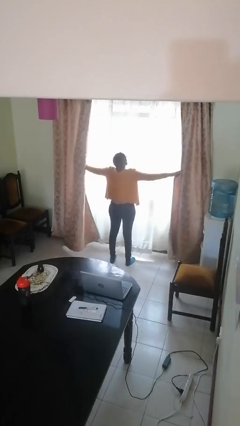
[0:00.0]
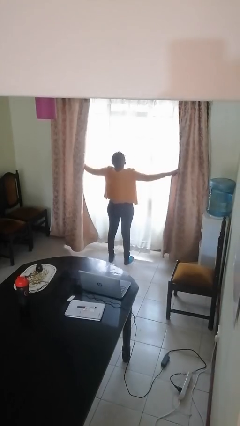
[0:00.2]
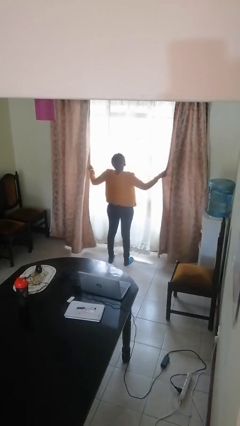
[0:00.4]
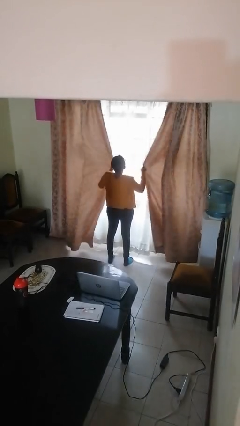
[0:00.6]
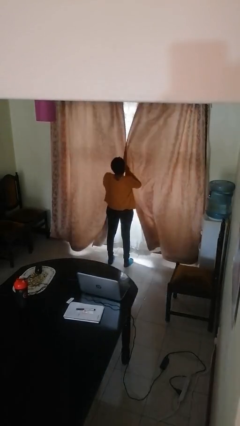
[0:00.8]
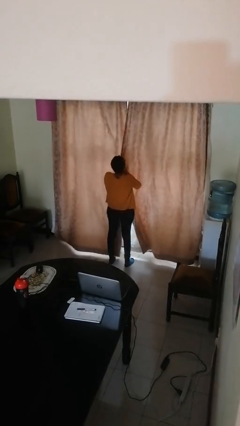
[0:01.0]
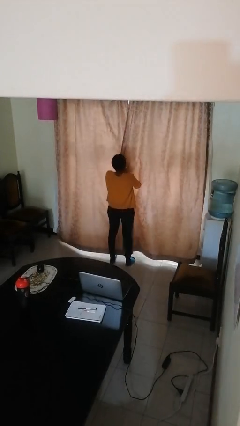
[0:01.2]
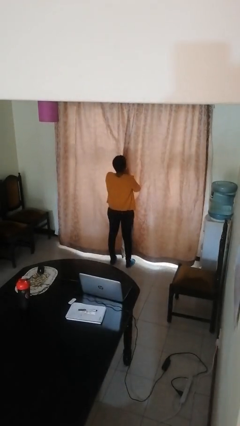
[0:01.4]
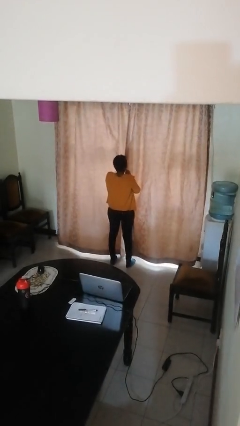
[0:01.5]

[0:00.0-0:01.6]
person closes curtains

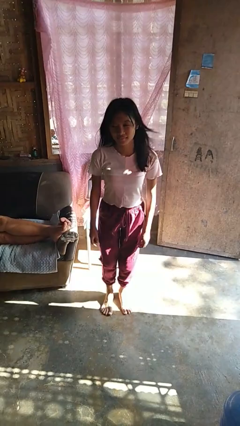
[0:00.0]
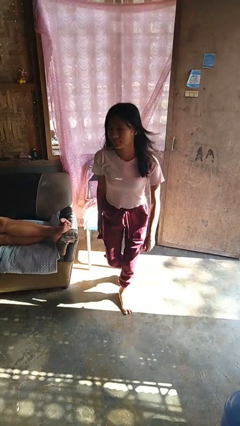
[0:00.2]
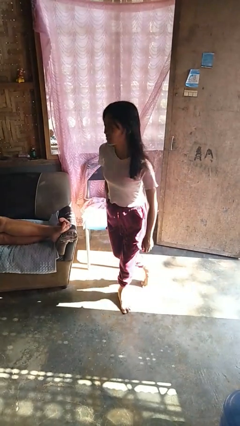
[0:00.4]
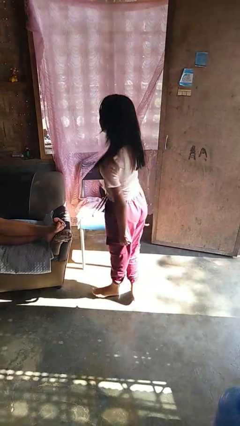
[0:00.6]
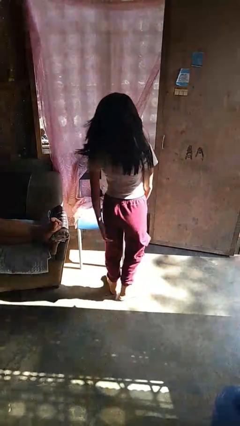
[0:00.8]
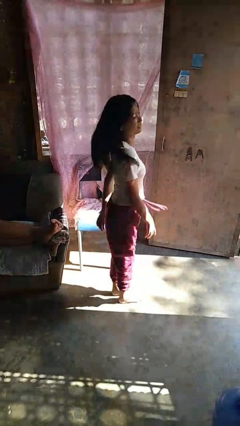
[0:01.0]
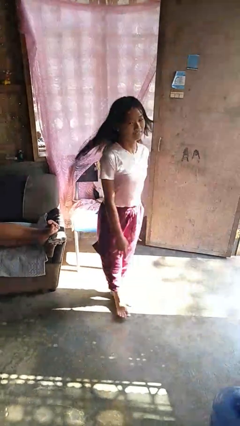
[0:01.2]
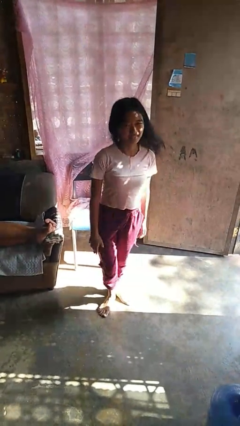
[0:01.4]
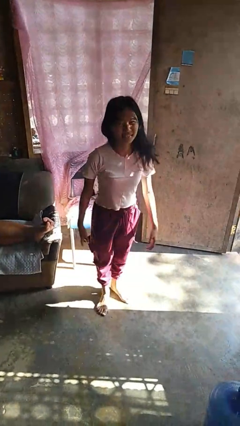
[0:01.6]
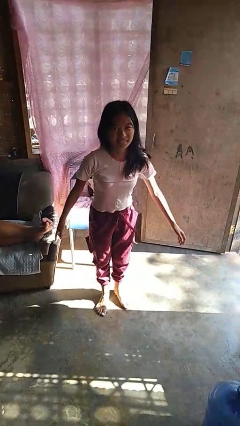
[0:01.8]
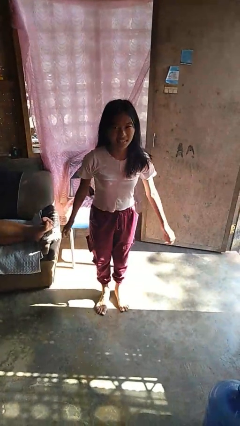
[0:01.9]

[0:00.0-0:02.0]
person twirls

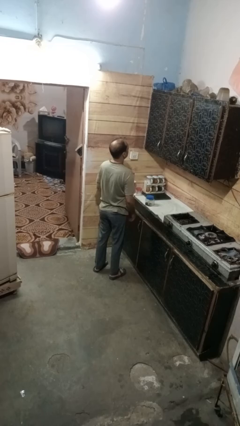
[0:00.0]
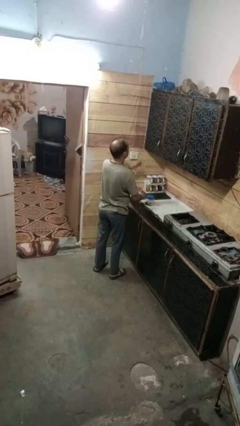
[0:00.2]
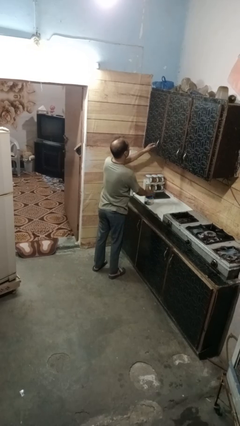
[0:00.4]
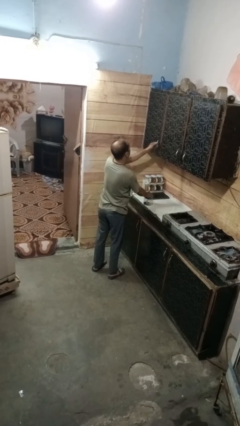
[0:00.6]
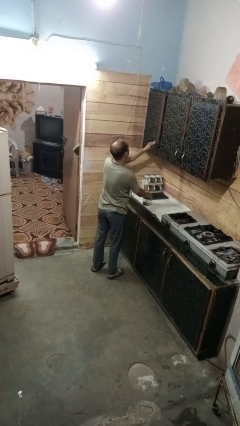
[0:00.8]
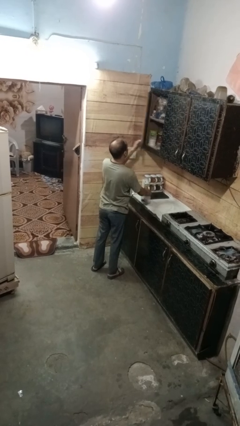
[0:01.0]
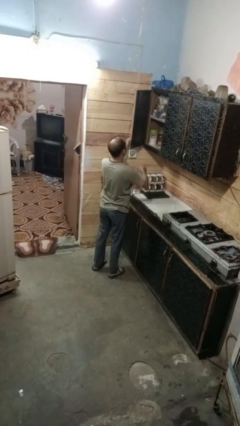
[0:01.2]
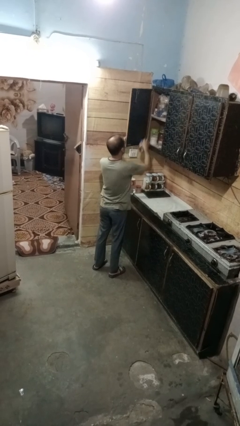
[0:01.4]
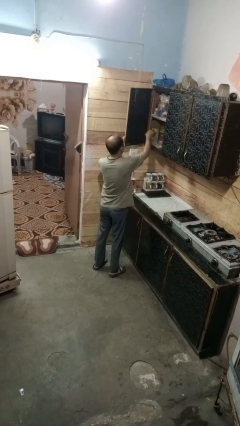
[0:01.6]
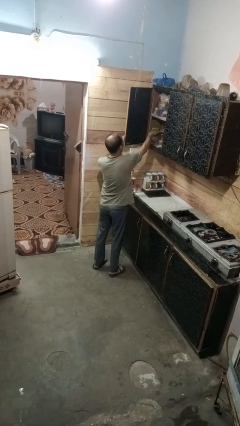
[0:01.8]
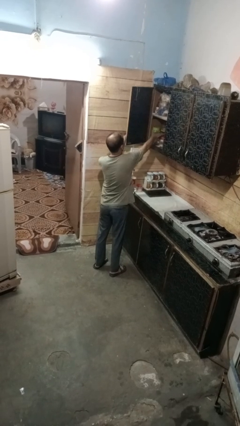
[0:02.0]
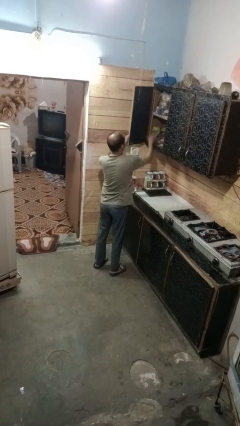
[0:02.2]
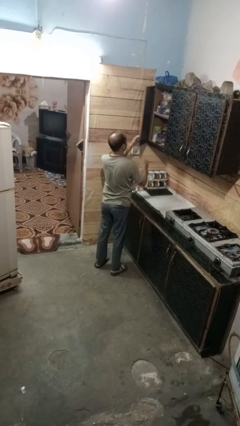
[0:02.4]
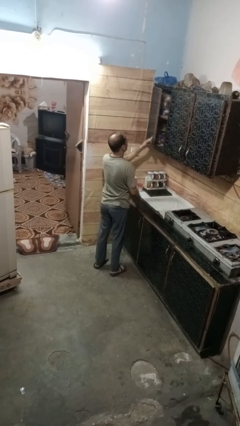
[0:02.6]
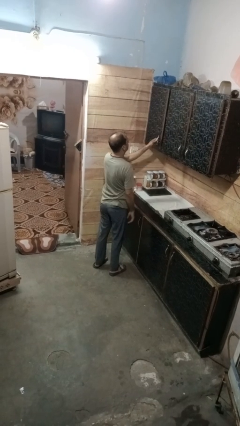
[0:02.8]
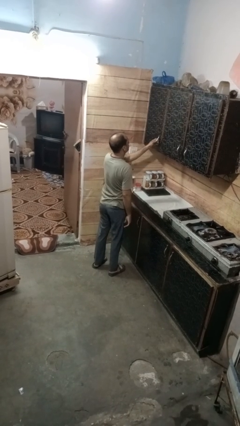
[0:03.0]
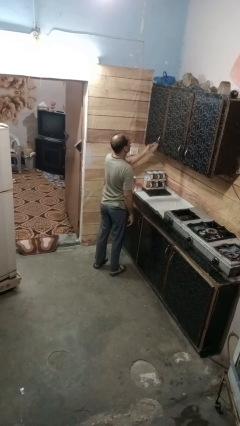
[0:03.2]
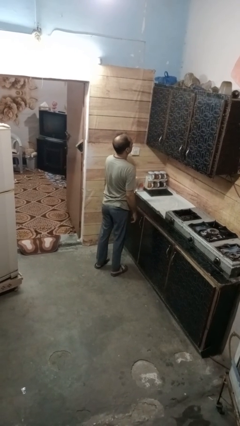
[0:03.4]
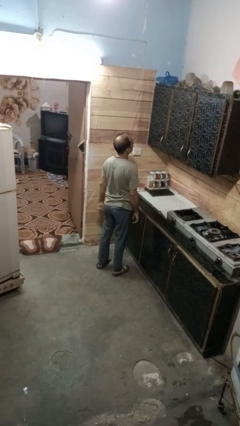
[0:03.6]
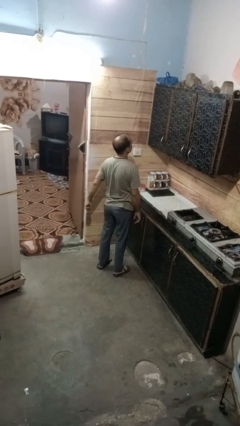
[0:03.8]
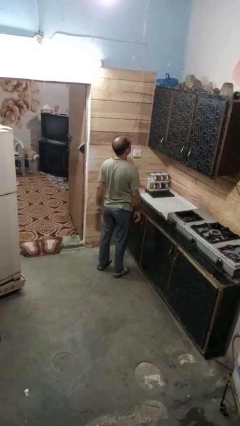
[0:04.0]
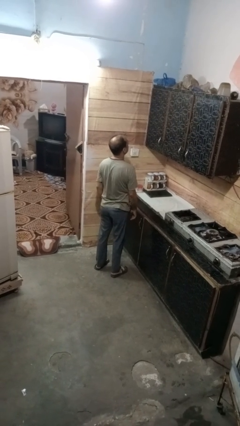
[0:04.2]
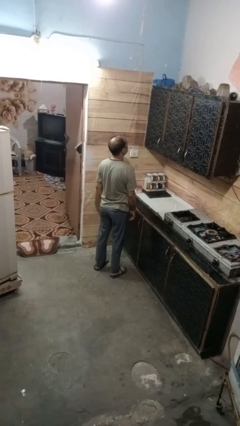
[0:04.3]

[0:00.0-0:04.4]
person puts object in cabinet

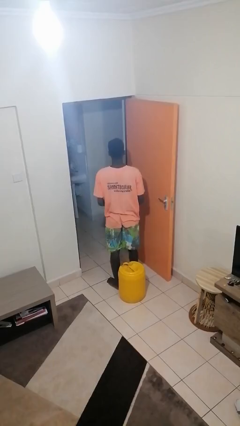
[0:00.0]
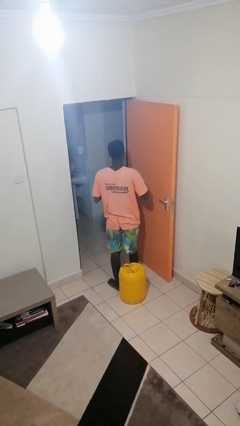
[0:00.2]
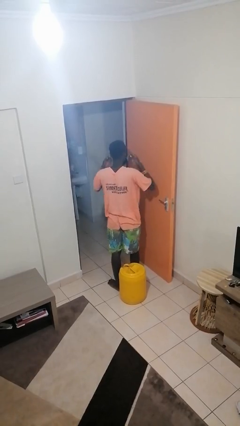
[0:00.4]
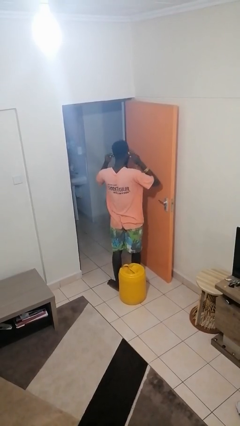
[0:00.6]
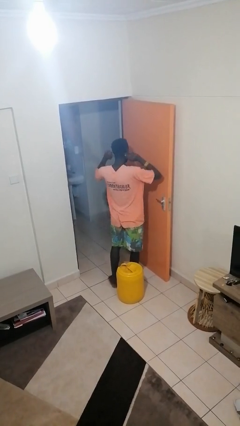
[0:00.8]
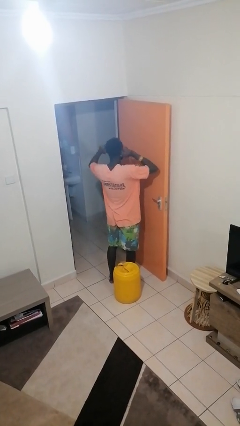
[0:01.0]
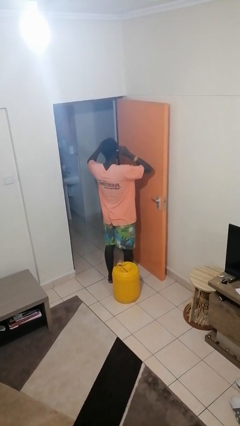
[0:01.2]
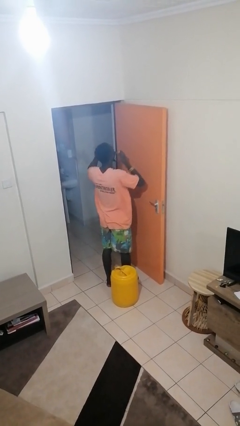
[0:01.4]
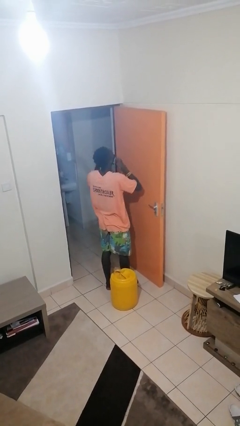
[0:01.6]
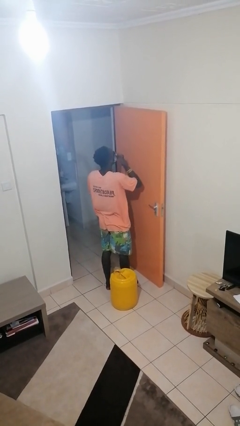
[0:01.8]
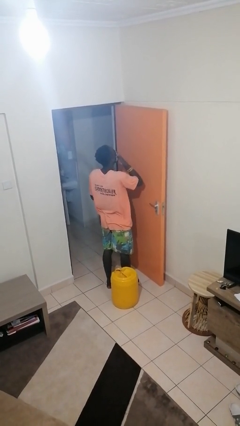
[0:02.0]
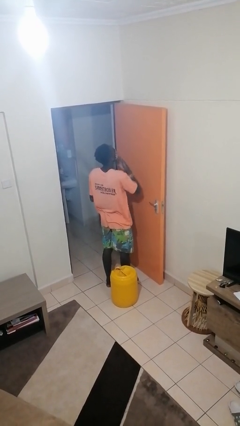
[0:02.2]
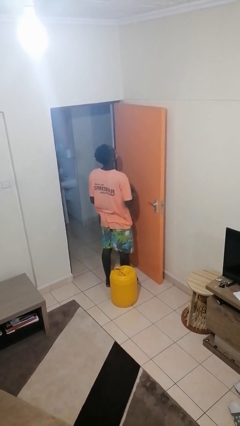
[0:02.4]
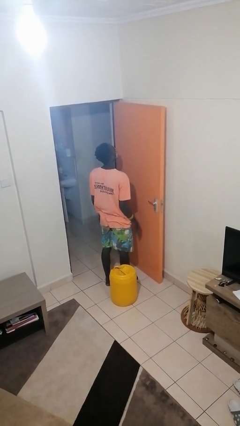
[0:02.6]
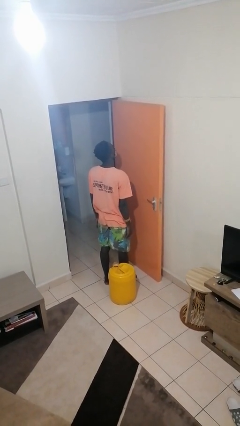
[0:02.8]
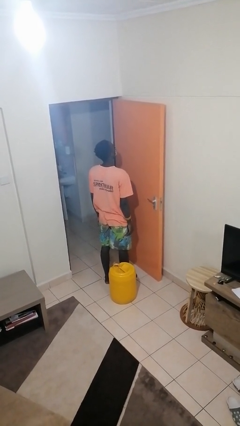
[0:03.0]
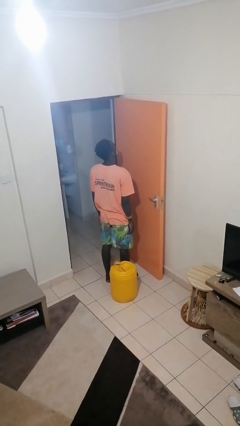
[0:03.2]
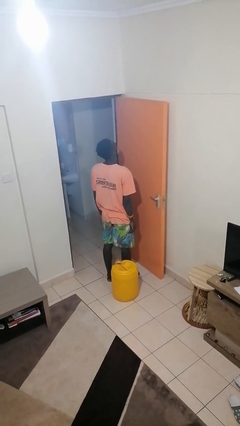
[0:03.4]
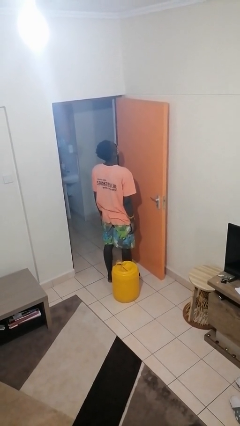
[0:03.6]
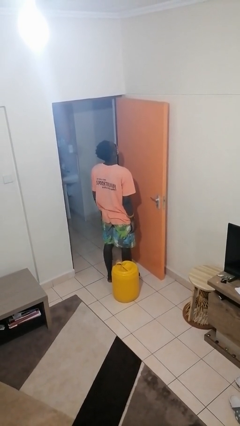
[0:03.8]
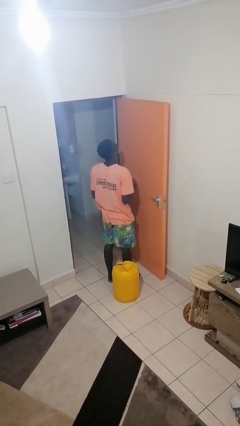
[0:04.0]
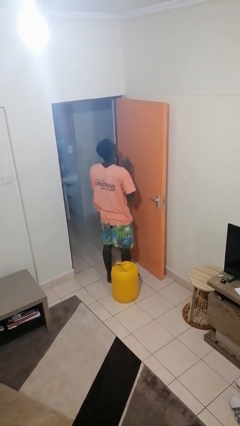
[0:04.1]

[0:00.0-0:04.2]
person puts on facemask

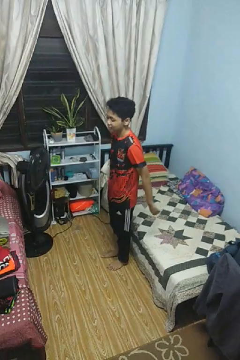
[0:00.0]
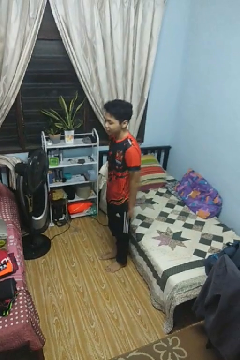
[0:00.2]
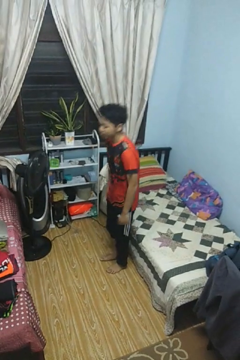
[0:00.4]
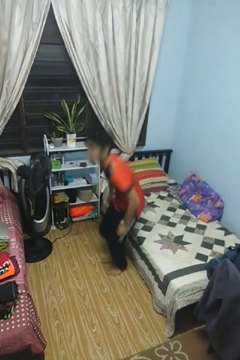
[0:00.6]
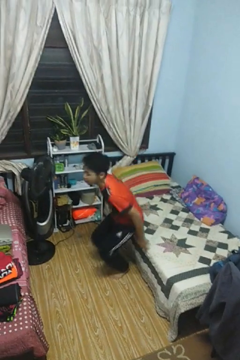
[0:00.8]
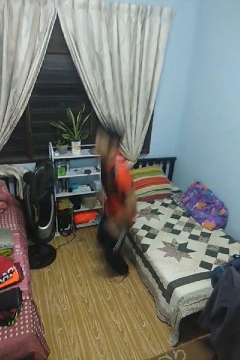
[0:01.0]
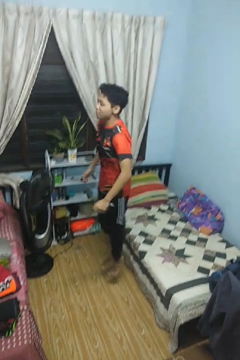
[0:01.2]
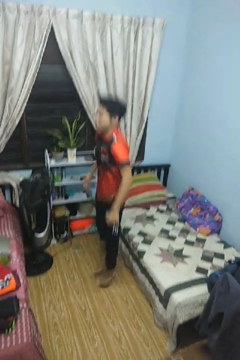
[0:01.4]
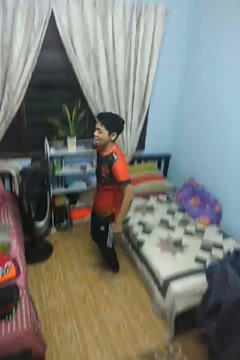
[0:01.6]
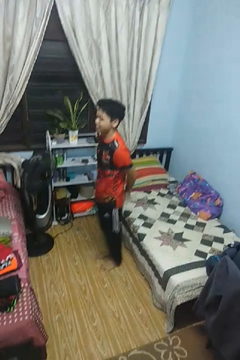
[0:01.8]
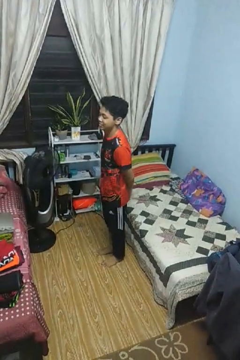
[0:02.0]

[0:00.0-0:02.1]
person jumps

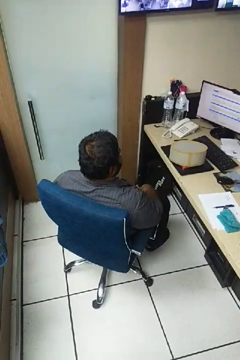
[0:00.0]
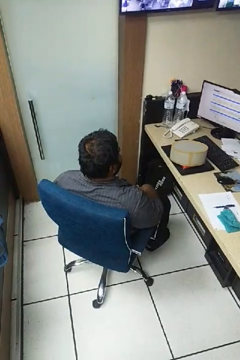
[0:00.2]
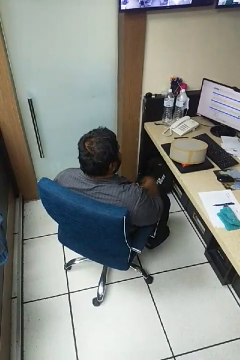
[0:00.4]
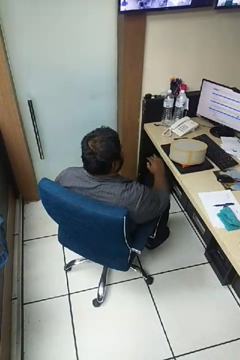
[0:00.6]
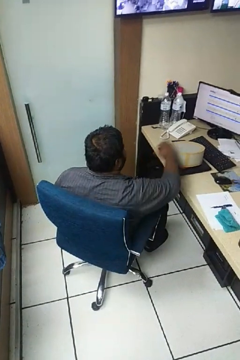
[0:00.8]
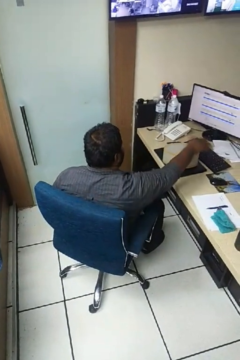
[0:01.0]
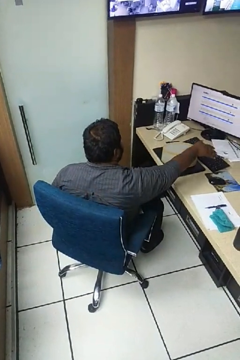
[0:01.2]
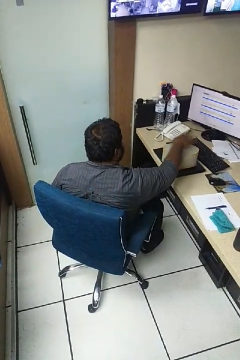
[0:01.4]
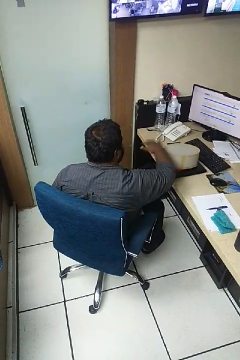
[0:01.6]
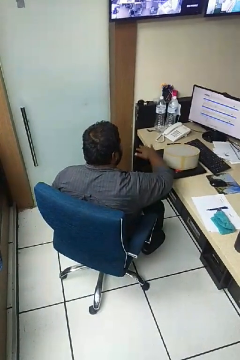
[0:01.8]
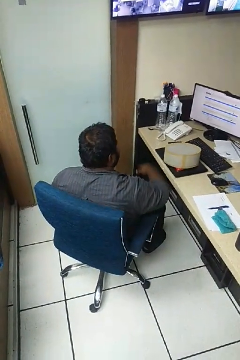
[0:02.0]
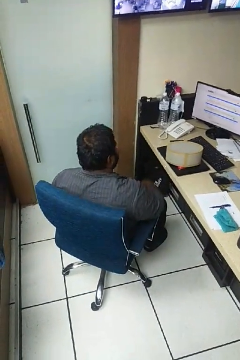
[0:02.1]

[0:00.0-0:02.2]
person waves hand over object

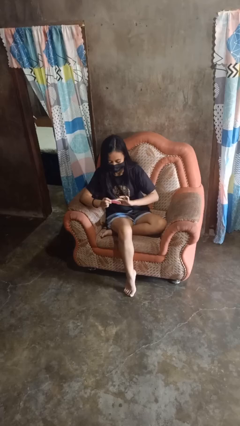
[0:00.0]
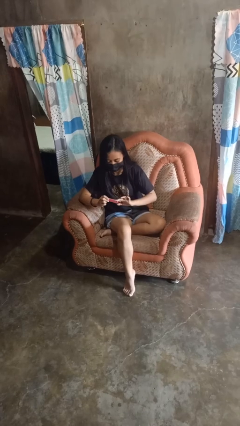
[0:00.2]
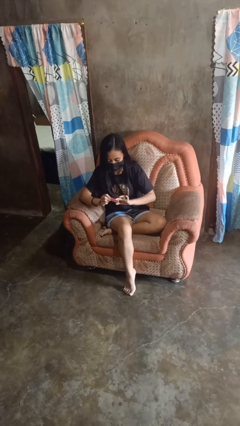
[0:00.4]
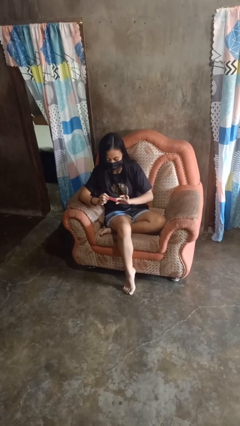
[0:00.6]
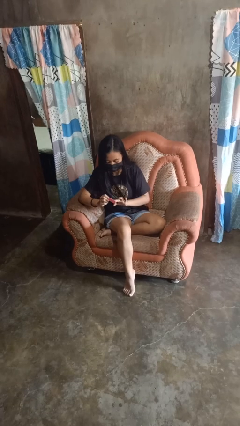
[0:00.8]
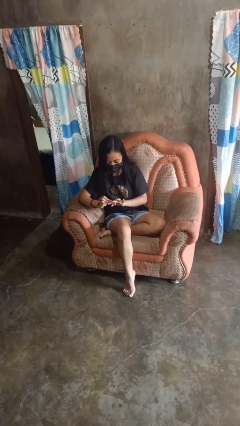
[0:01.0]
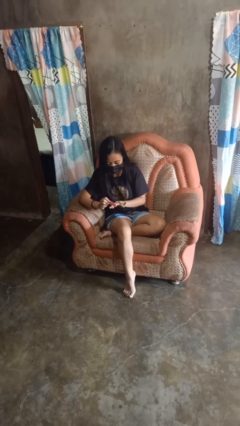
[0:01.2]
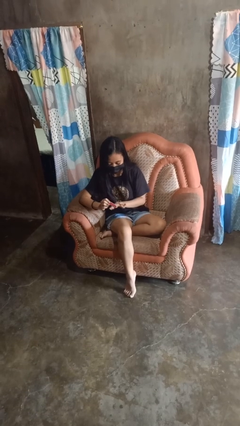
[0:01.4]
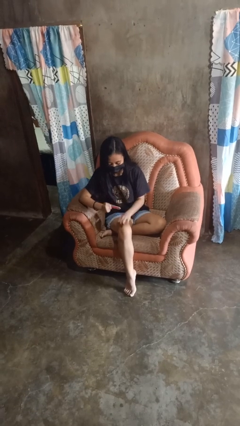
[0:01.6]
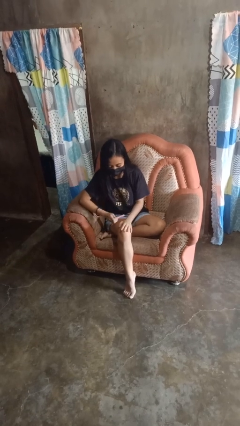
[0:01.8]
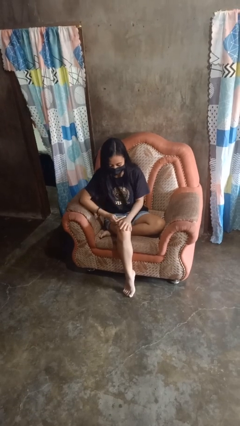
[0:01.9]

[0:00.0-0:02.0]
person files fingernails
